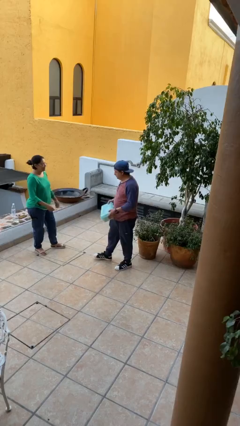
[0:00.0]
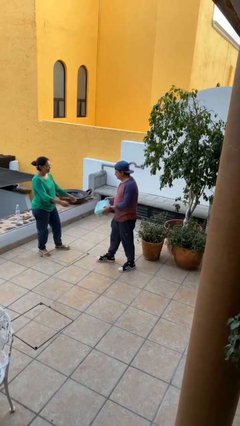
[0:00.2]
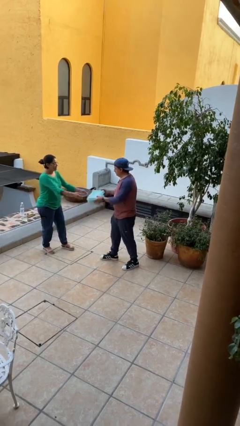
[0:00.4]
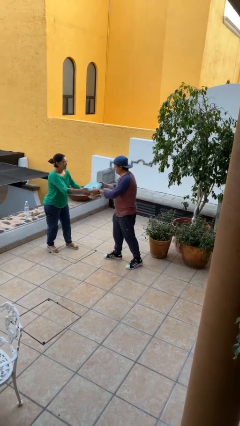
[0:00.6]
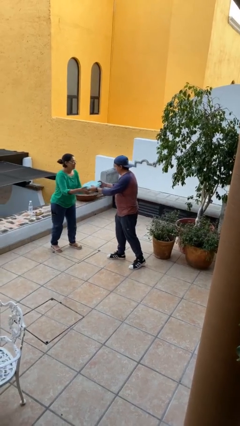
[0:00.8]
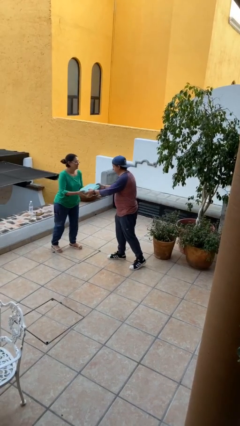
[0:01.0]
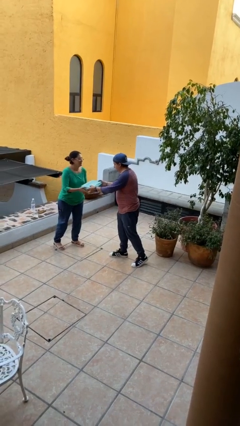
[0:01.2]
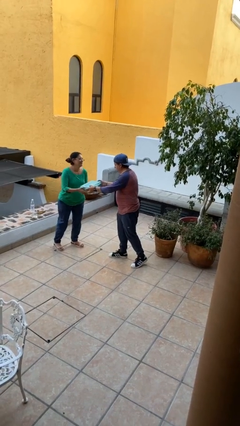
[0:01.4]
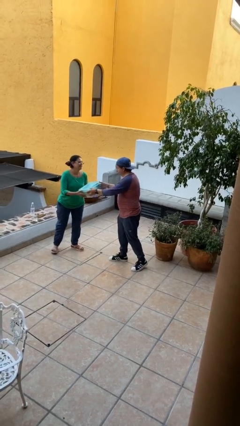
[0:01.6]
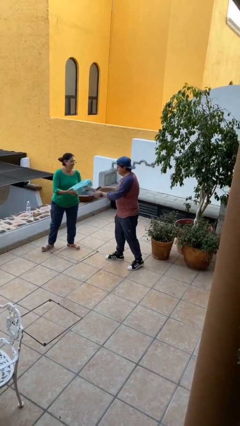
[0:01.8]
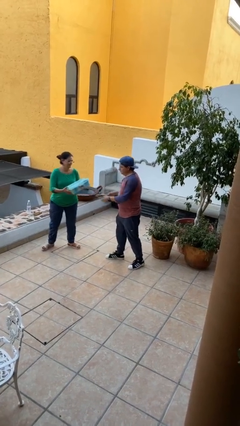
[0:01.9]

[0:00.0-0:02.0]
person transfers object to person

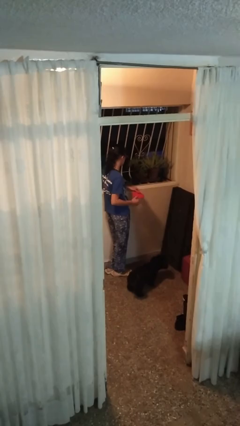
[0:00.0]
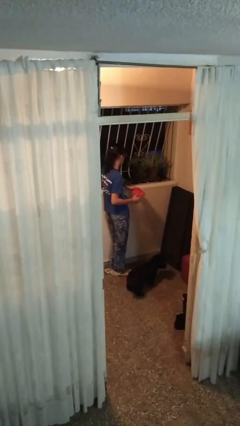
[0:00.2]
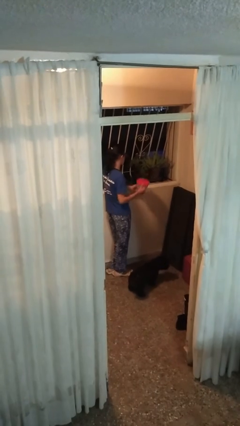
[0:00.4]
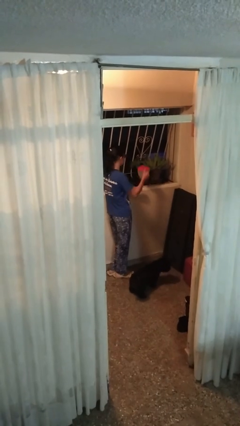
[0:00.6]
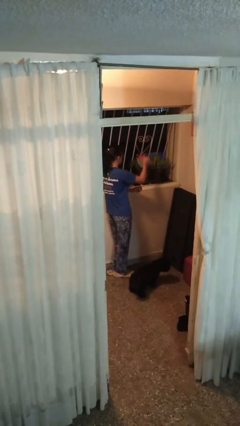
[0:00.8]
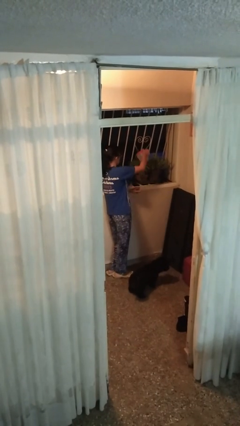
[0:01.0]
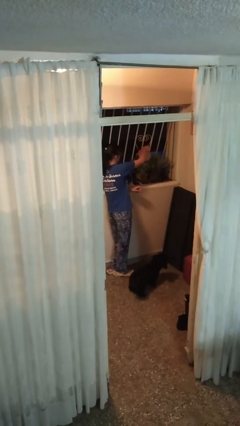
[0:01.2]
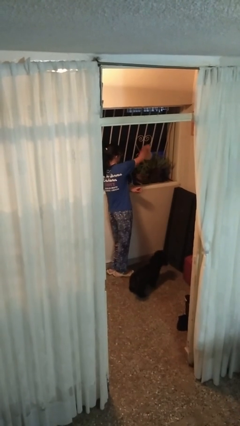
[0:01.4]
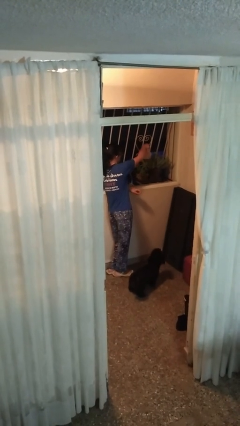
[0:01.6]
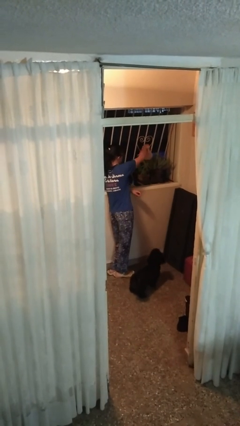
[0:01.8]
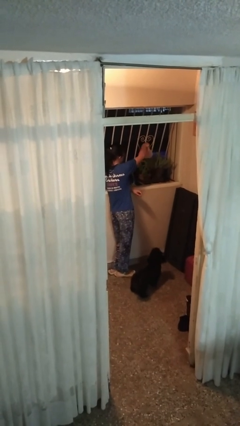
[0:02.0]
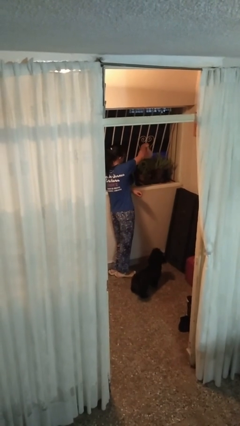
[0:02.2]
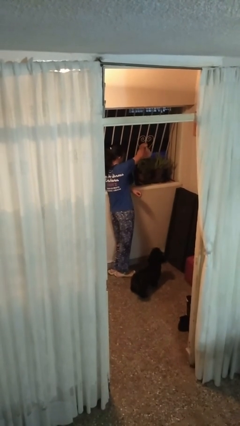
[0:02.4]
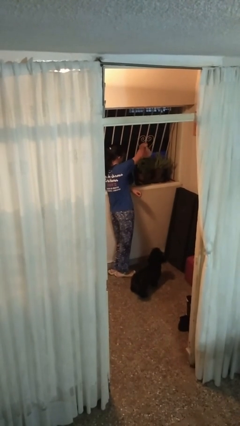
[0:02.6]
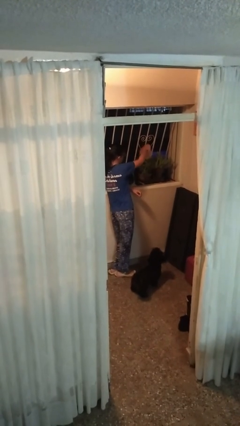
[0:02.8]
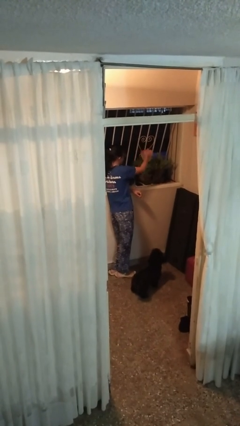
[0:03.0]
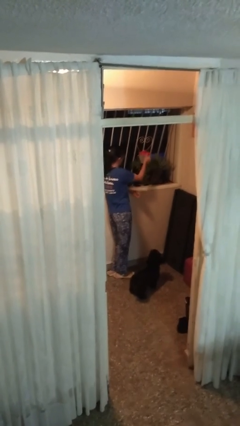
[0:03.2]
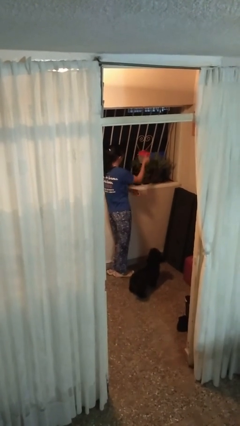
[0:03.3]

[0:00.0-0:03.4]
person waters houseplant

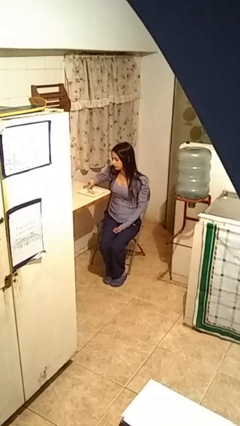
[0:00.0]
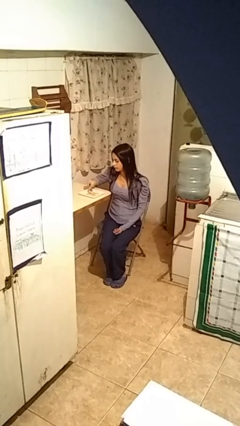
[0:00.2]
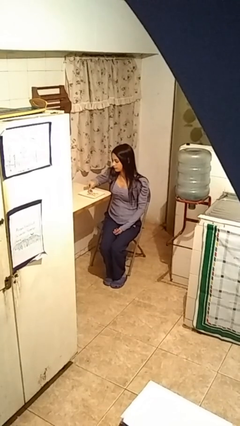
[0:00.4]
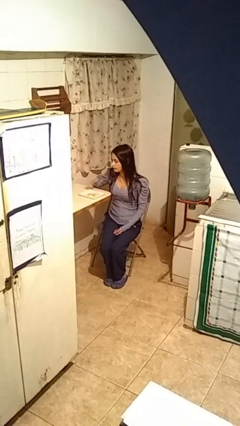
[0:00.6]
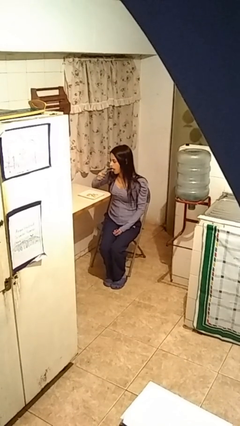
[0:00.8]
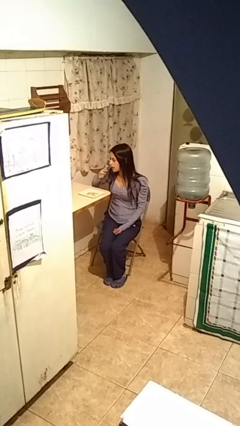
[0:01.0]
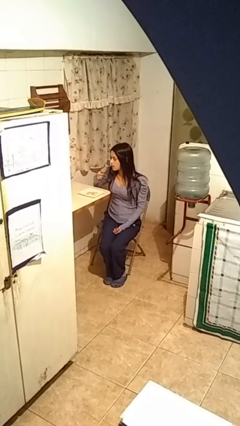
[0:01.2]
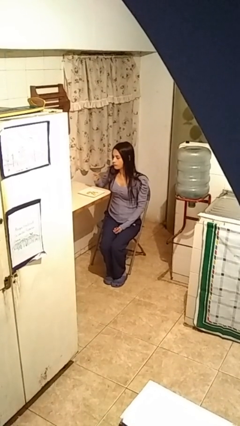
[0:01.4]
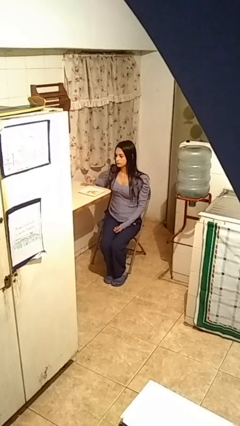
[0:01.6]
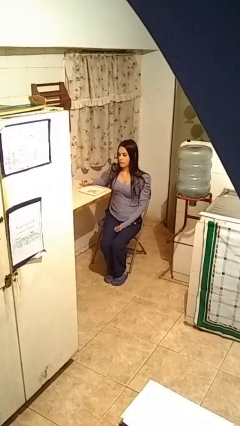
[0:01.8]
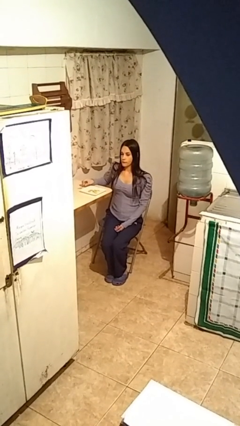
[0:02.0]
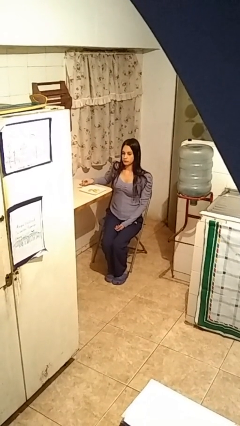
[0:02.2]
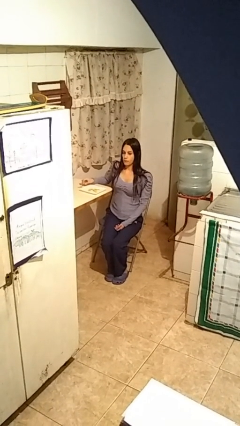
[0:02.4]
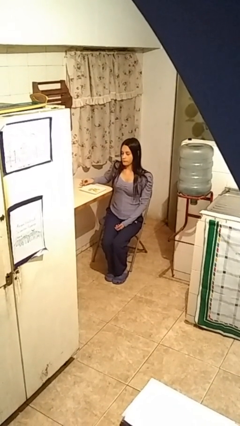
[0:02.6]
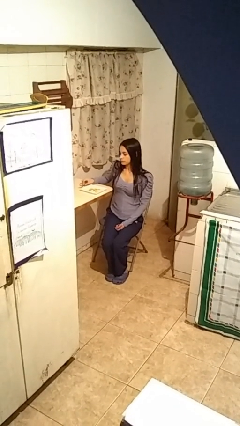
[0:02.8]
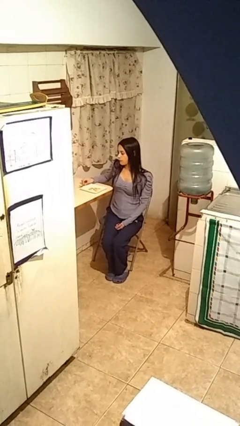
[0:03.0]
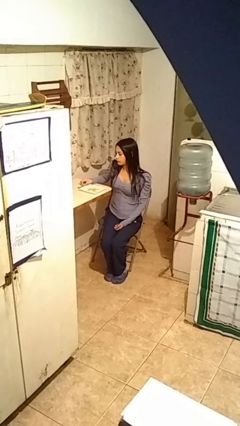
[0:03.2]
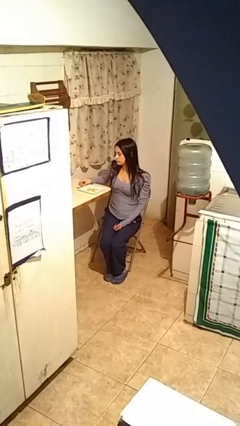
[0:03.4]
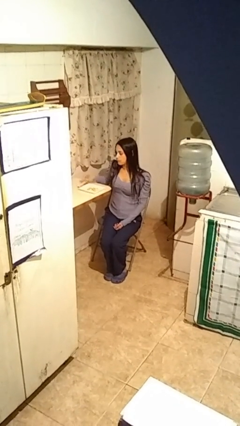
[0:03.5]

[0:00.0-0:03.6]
person eats with utensil

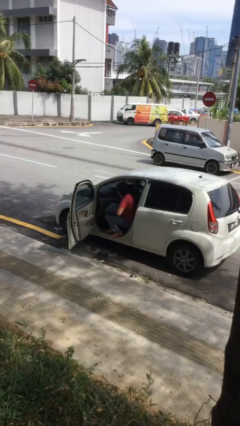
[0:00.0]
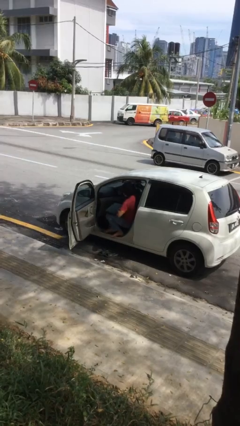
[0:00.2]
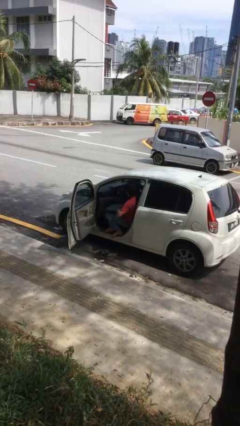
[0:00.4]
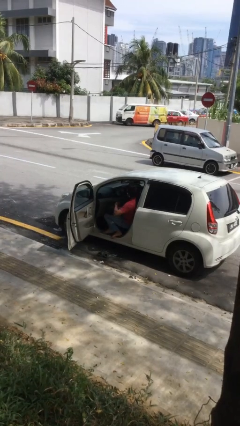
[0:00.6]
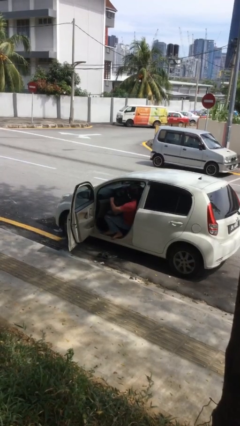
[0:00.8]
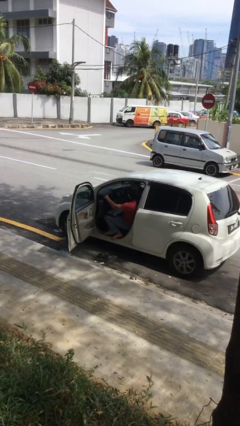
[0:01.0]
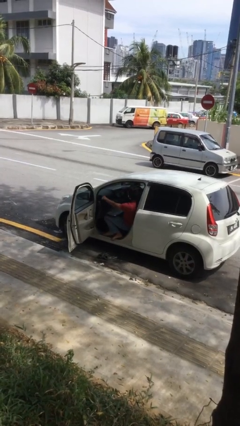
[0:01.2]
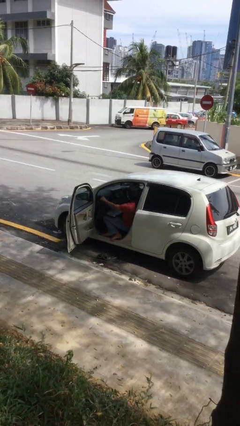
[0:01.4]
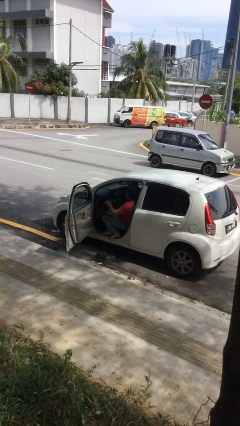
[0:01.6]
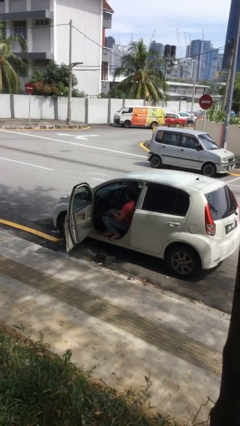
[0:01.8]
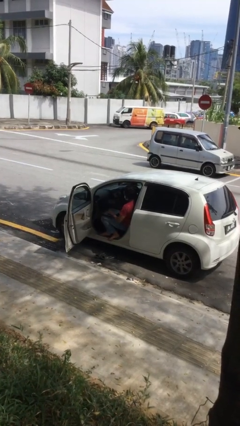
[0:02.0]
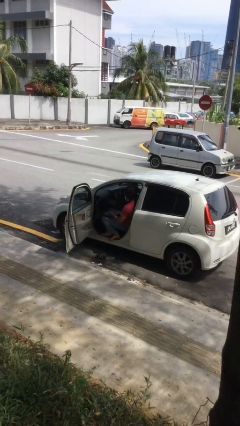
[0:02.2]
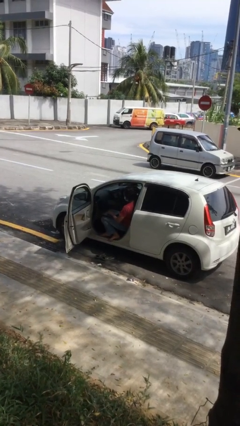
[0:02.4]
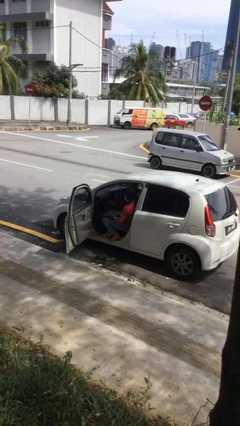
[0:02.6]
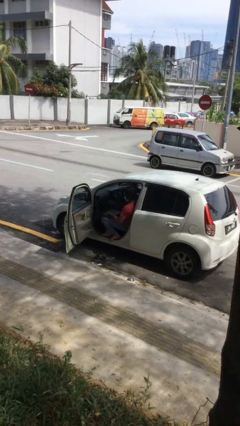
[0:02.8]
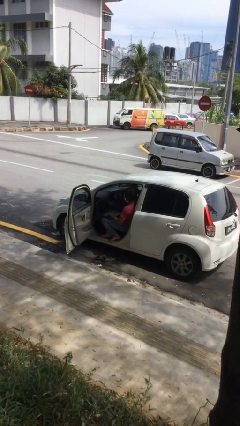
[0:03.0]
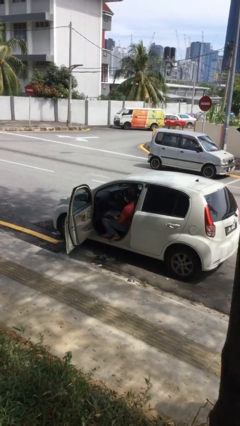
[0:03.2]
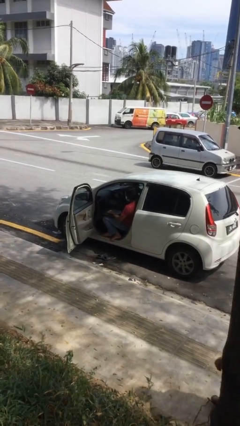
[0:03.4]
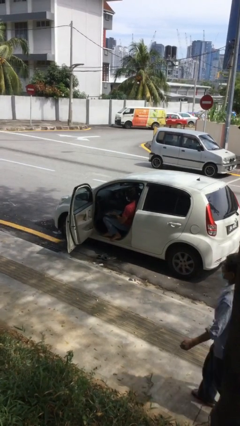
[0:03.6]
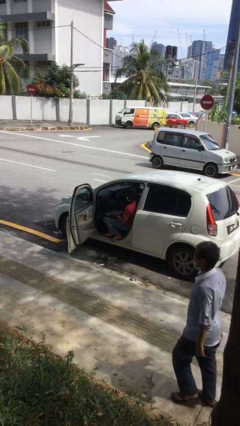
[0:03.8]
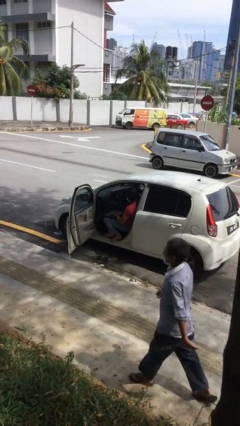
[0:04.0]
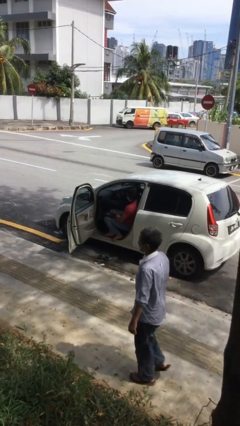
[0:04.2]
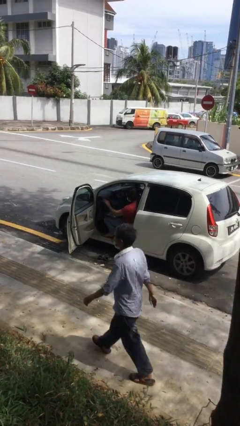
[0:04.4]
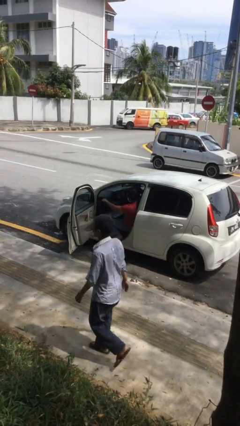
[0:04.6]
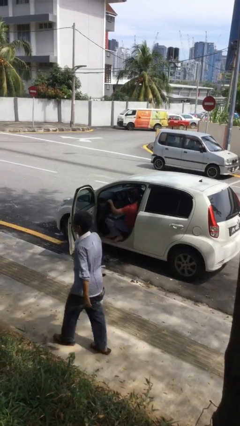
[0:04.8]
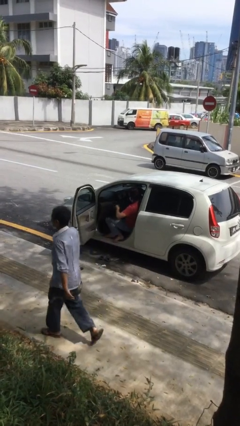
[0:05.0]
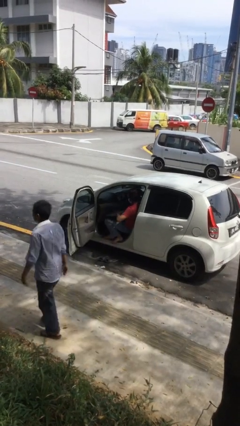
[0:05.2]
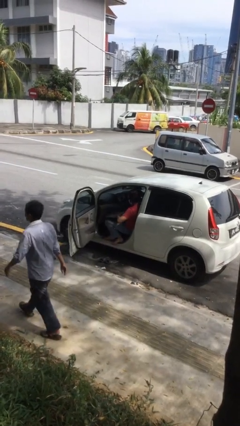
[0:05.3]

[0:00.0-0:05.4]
person interacts with laptop

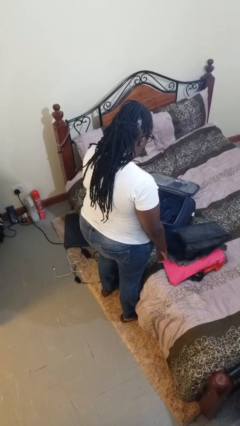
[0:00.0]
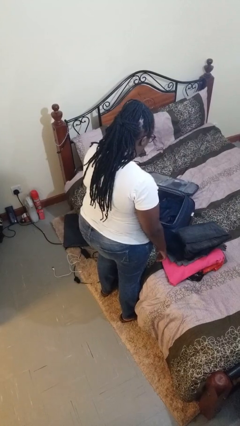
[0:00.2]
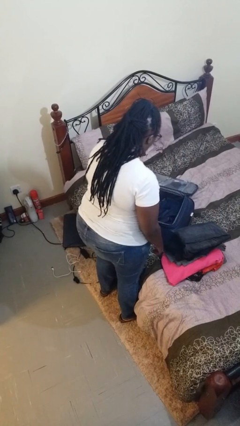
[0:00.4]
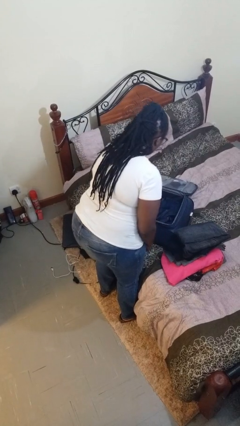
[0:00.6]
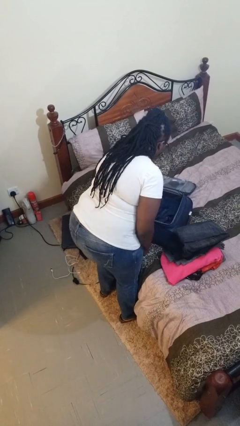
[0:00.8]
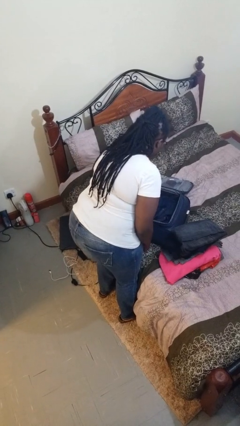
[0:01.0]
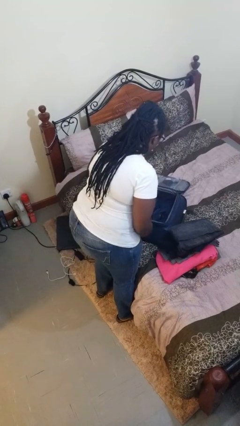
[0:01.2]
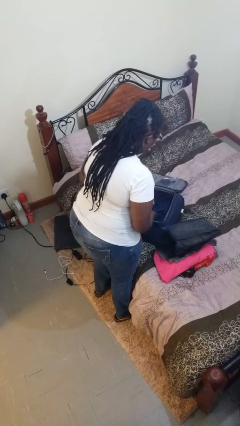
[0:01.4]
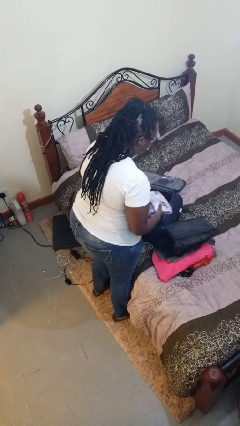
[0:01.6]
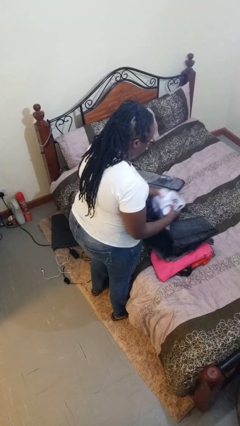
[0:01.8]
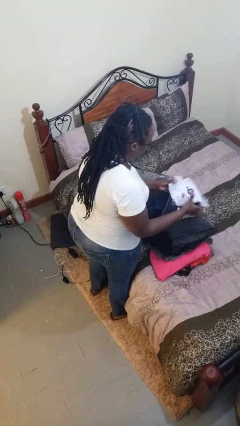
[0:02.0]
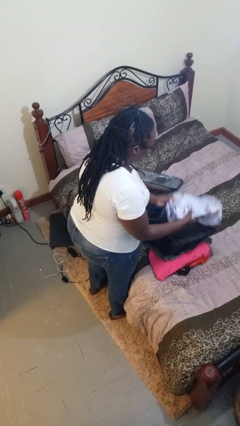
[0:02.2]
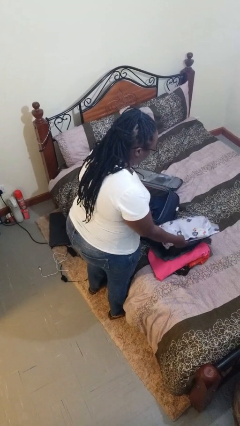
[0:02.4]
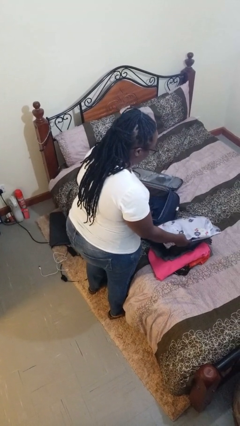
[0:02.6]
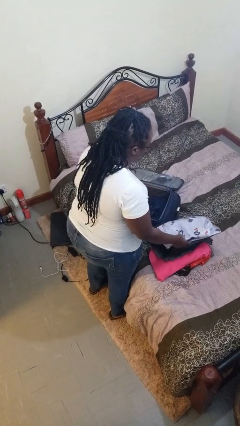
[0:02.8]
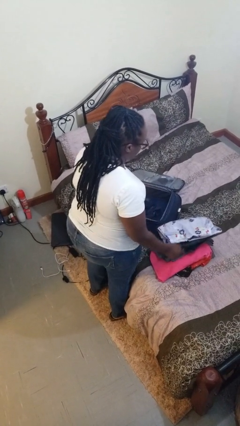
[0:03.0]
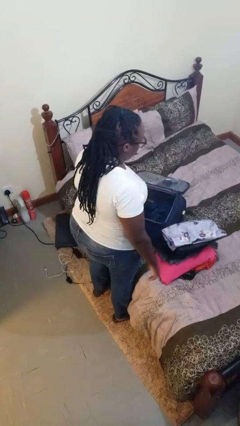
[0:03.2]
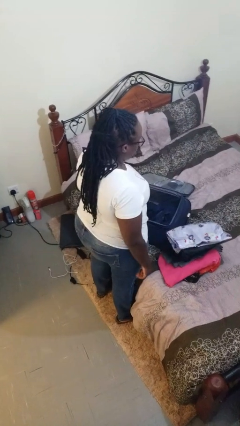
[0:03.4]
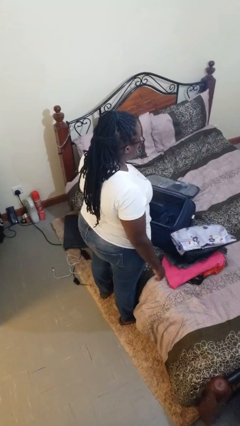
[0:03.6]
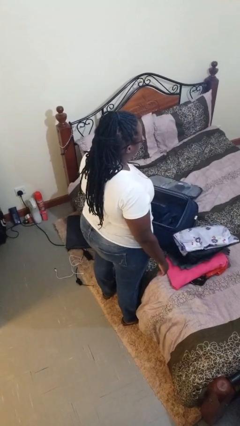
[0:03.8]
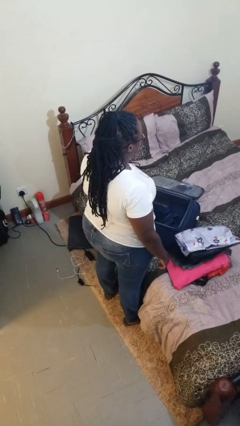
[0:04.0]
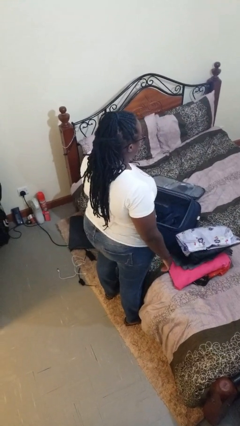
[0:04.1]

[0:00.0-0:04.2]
person unloads clothes from suitcase
